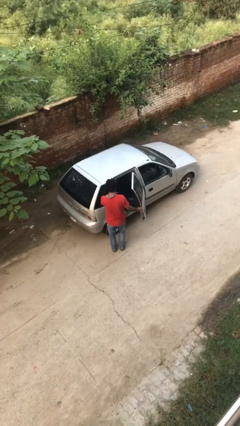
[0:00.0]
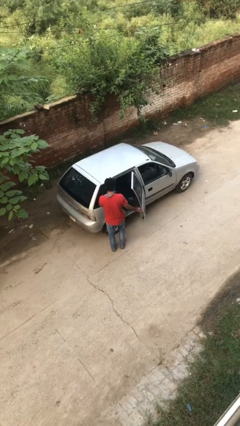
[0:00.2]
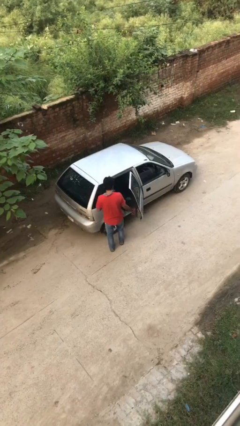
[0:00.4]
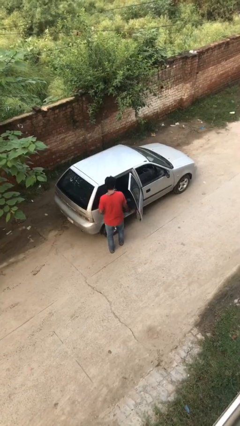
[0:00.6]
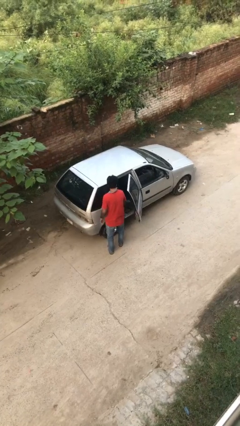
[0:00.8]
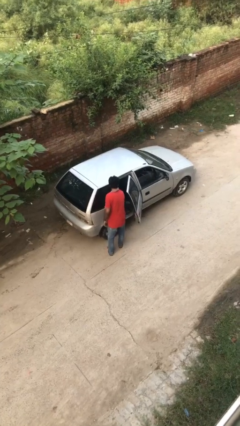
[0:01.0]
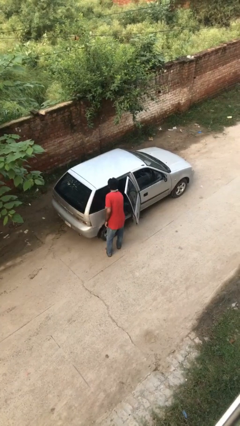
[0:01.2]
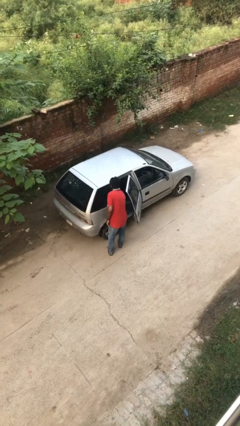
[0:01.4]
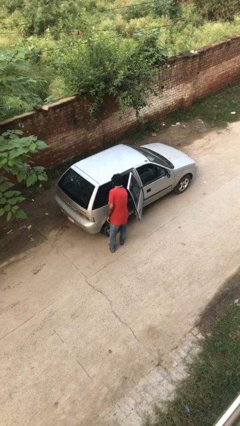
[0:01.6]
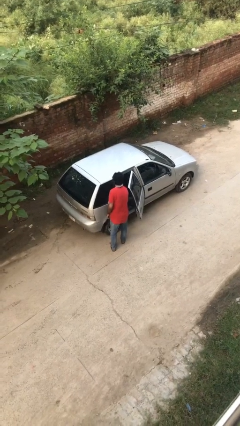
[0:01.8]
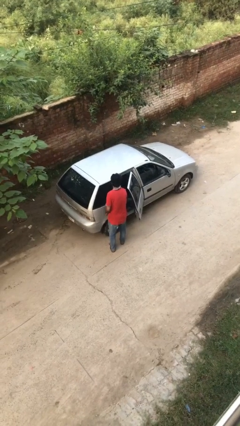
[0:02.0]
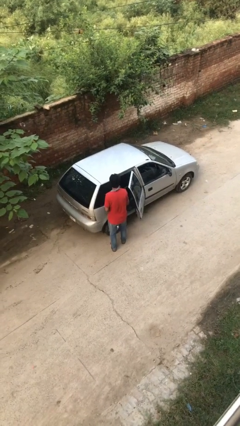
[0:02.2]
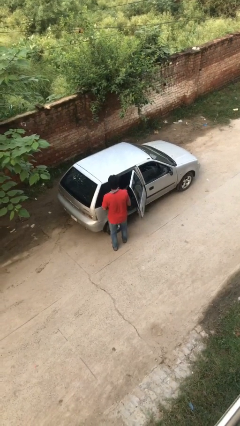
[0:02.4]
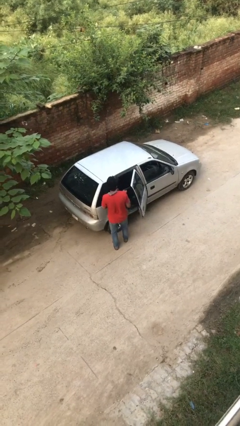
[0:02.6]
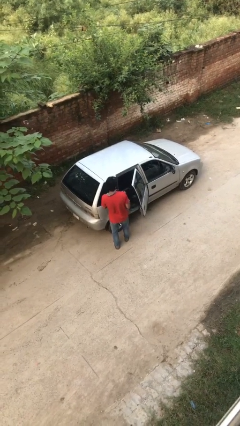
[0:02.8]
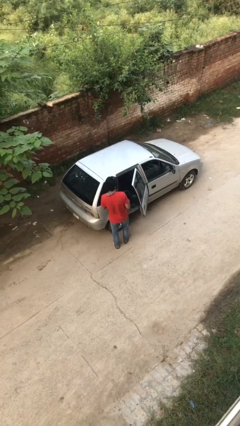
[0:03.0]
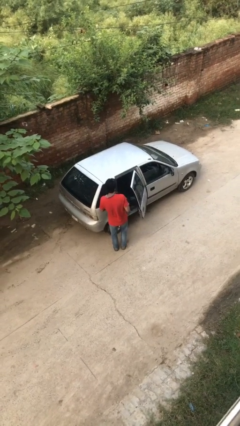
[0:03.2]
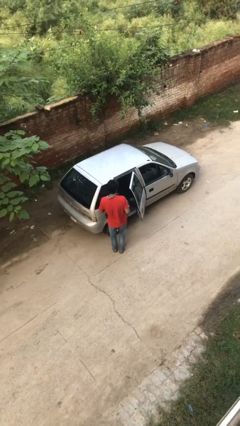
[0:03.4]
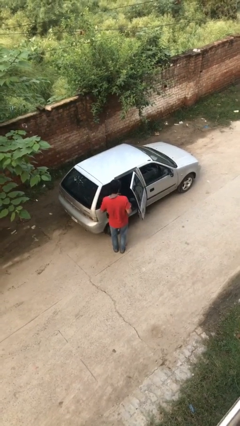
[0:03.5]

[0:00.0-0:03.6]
person unloads car

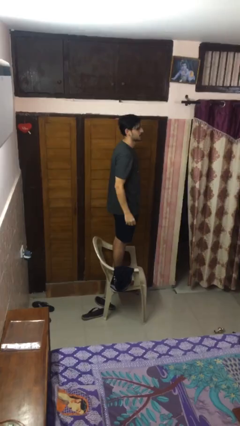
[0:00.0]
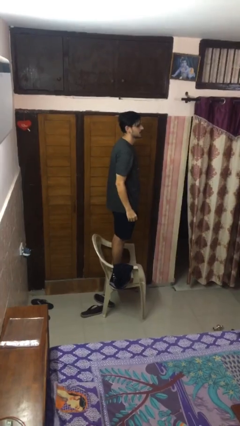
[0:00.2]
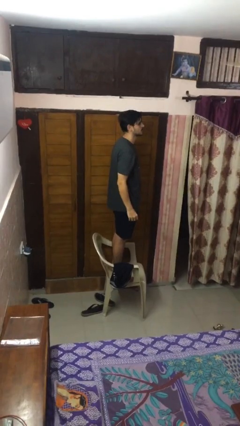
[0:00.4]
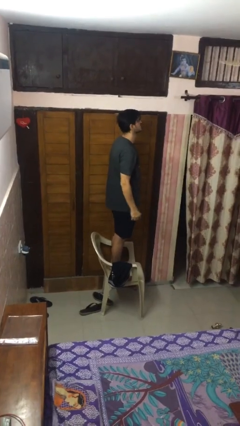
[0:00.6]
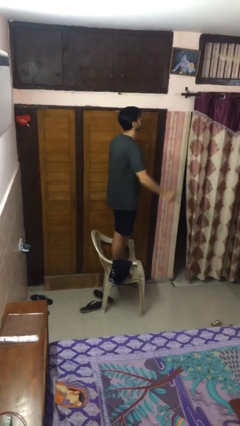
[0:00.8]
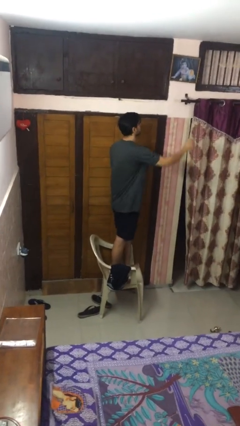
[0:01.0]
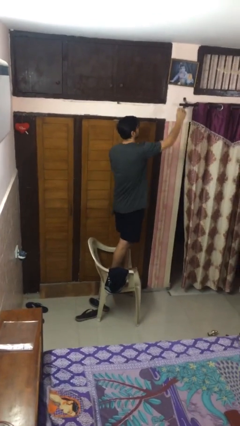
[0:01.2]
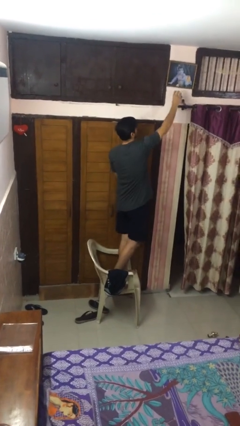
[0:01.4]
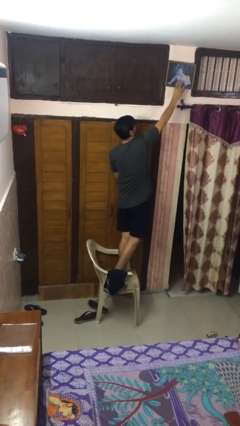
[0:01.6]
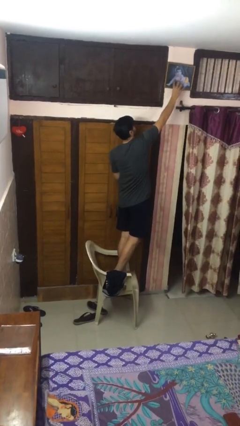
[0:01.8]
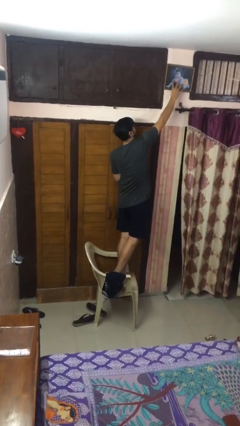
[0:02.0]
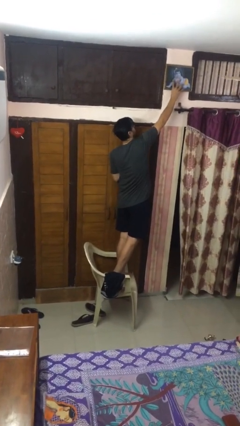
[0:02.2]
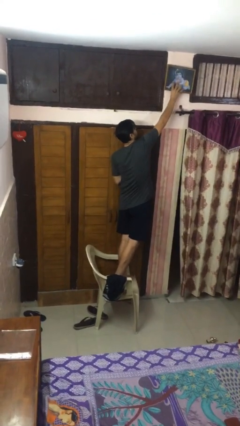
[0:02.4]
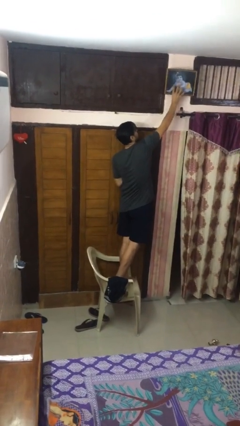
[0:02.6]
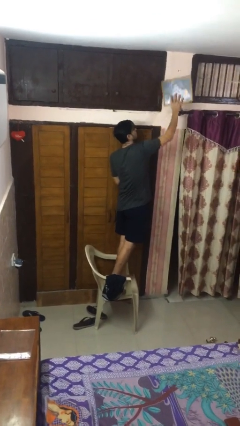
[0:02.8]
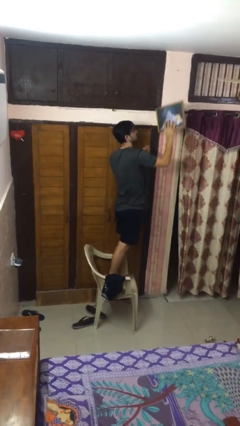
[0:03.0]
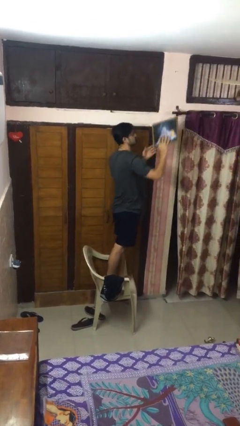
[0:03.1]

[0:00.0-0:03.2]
person takes down picture frame

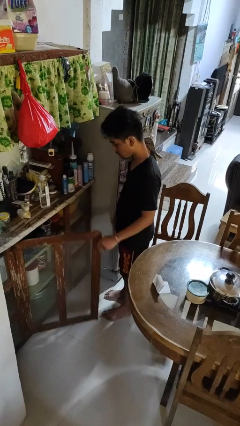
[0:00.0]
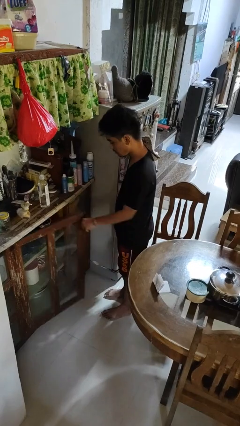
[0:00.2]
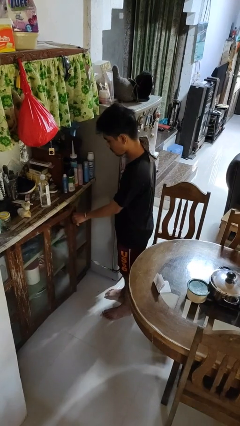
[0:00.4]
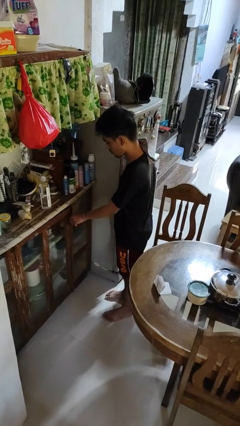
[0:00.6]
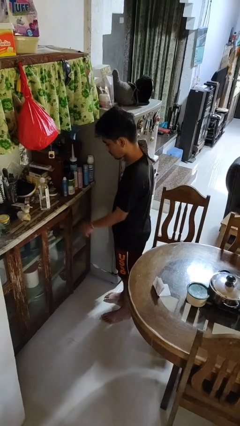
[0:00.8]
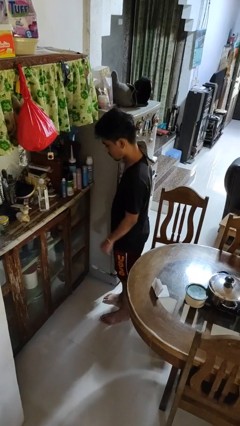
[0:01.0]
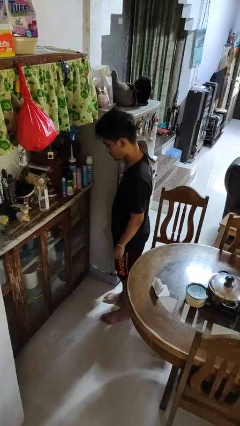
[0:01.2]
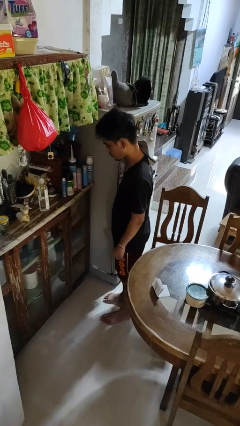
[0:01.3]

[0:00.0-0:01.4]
person closes cabinet

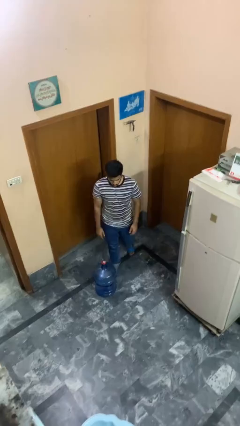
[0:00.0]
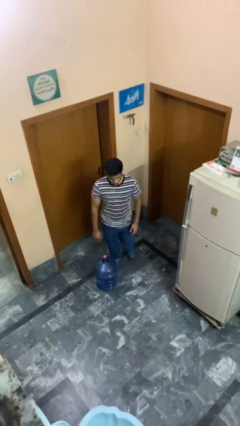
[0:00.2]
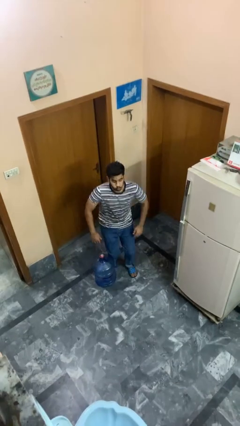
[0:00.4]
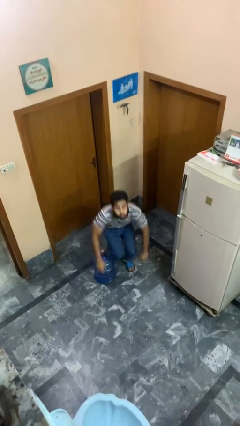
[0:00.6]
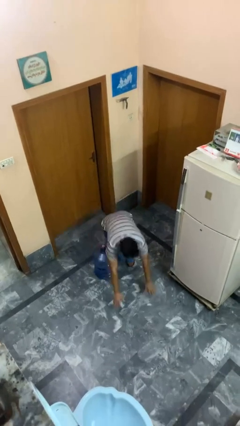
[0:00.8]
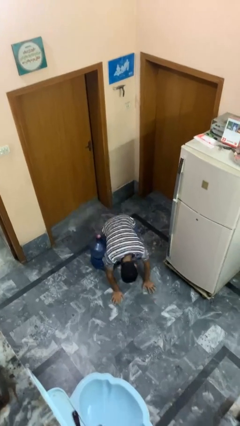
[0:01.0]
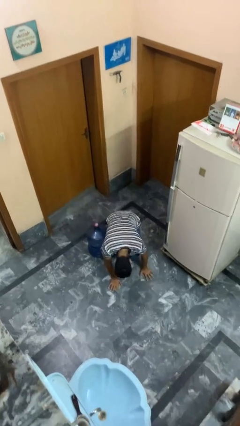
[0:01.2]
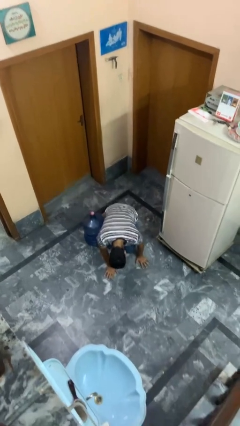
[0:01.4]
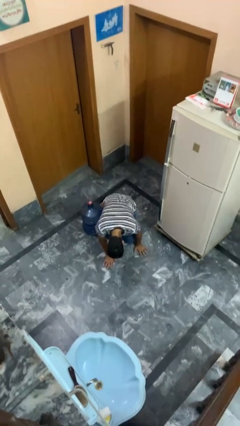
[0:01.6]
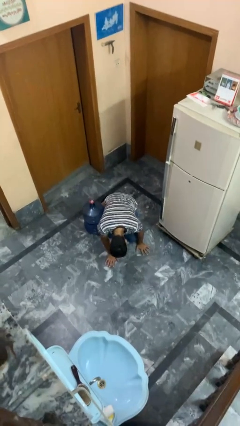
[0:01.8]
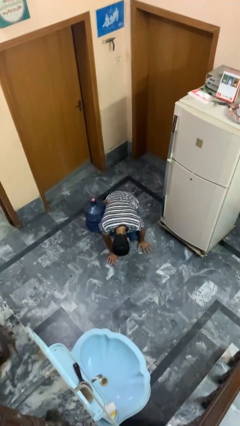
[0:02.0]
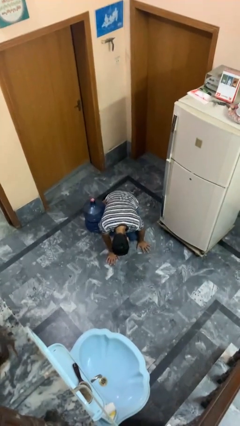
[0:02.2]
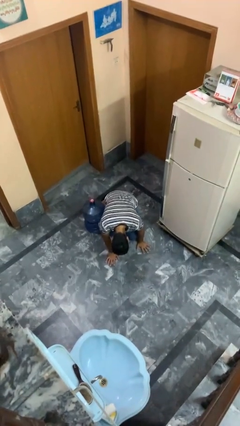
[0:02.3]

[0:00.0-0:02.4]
person trips on object on floor

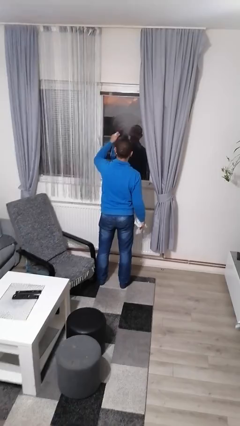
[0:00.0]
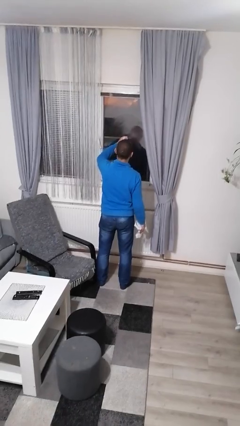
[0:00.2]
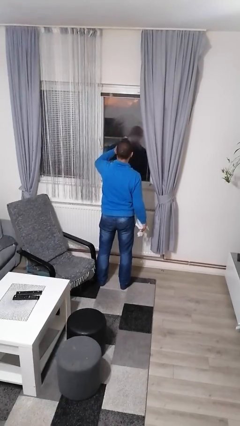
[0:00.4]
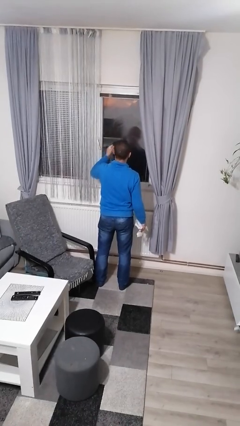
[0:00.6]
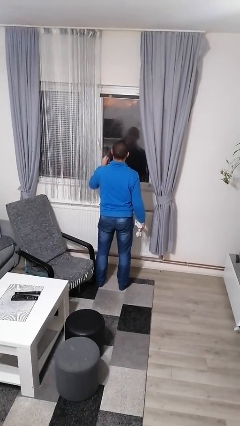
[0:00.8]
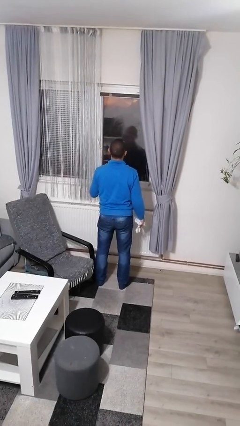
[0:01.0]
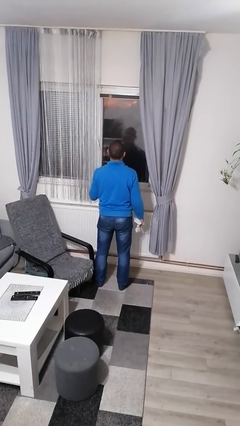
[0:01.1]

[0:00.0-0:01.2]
person sprays from bottle

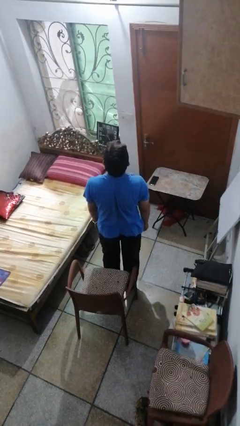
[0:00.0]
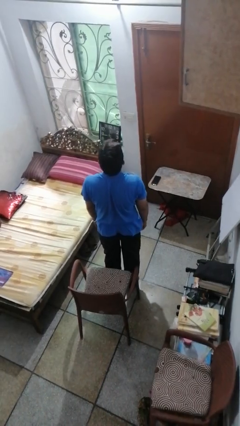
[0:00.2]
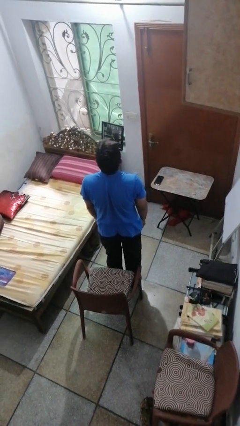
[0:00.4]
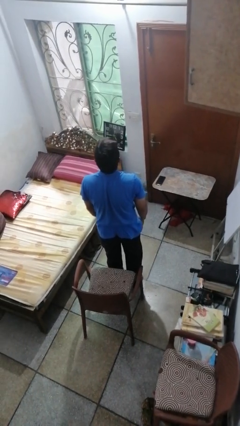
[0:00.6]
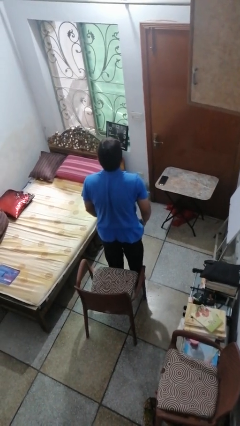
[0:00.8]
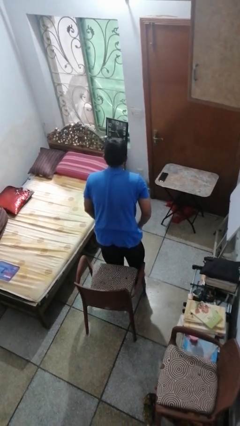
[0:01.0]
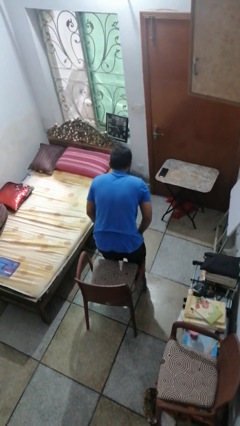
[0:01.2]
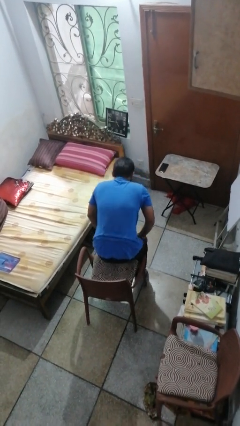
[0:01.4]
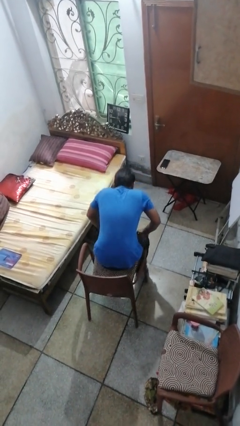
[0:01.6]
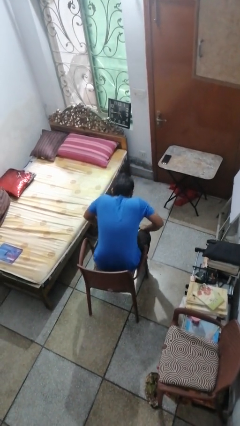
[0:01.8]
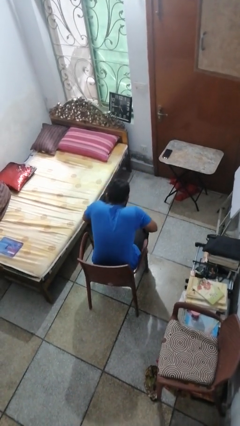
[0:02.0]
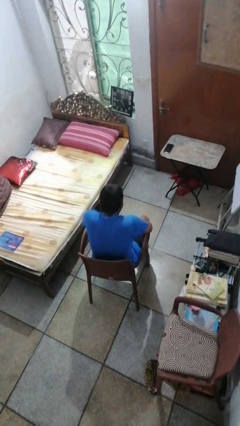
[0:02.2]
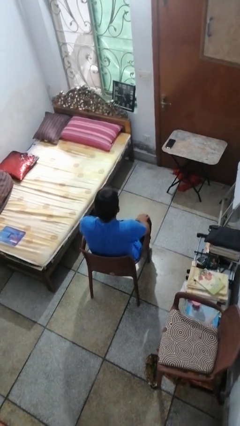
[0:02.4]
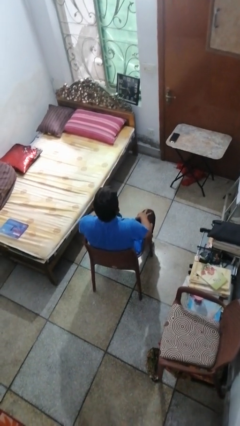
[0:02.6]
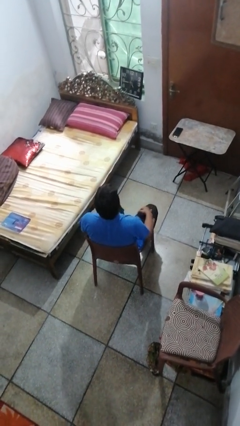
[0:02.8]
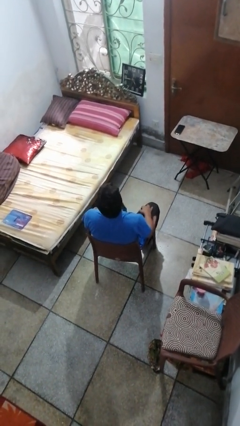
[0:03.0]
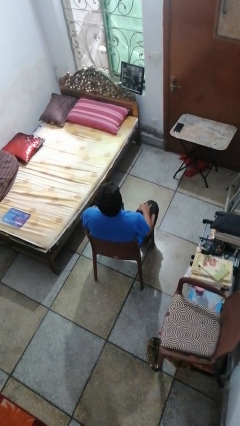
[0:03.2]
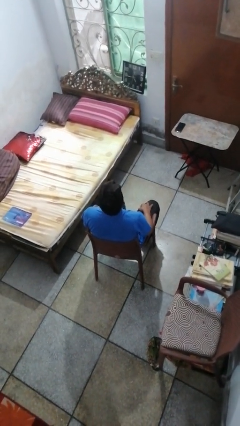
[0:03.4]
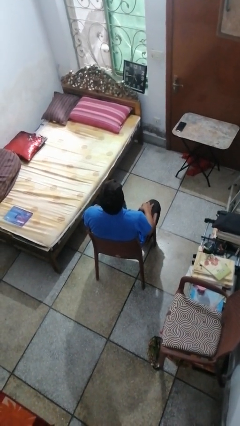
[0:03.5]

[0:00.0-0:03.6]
person sits down

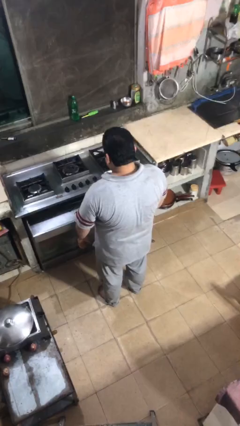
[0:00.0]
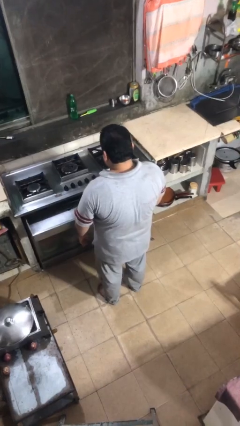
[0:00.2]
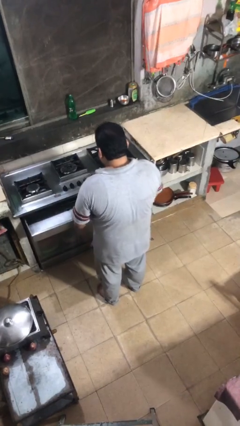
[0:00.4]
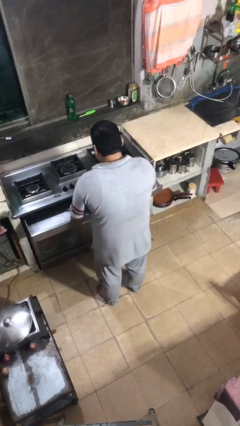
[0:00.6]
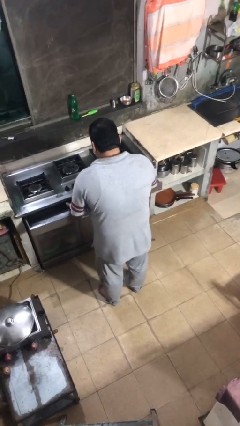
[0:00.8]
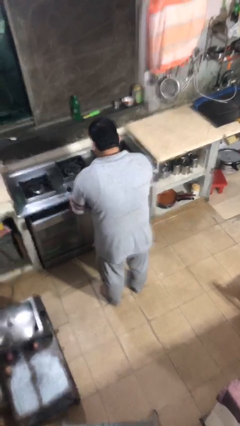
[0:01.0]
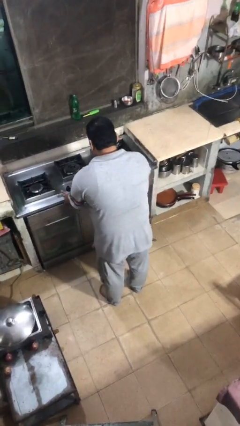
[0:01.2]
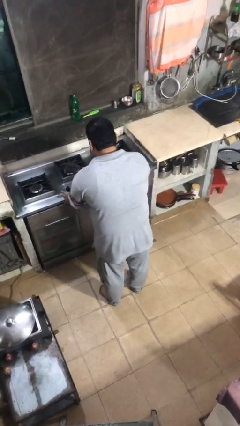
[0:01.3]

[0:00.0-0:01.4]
person closes kitchen drawer
